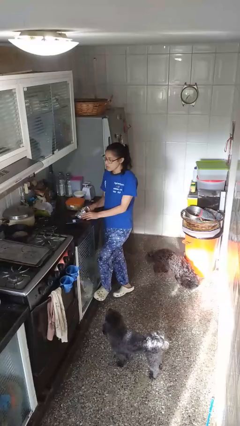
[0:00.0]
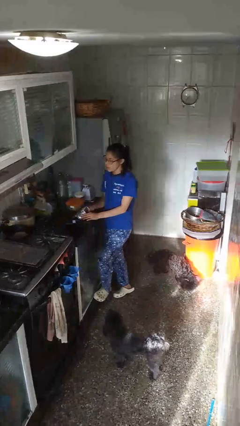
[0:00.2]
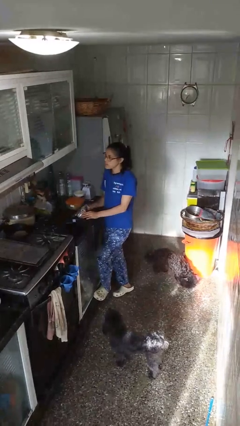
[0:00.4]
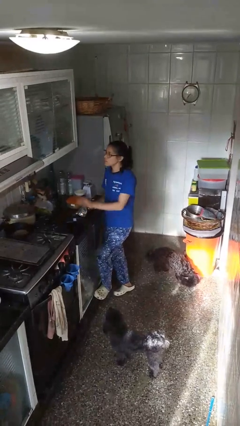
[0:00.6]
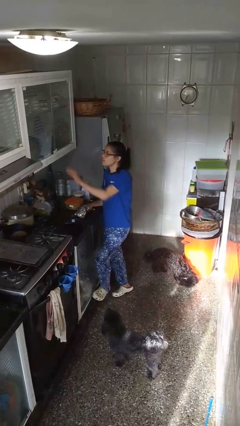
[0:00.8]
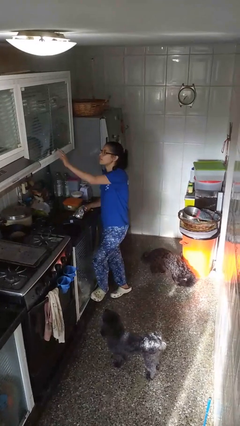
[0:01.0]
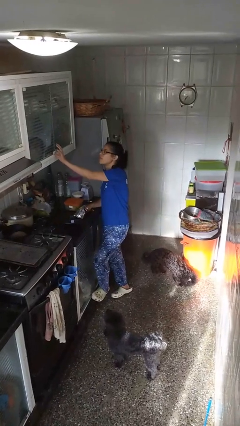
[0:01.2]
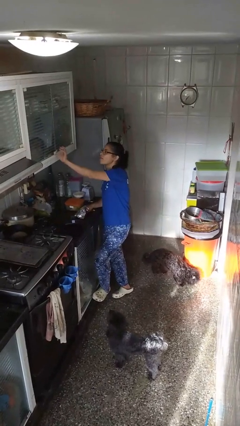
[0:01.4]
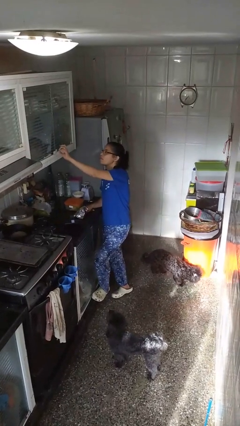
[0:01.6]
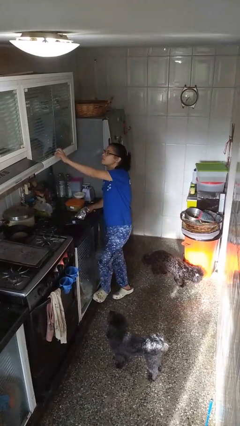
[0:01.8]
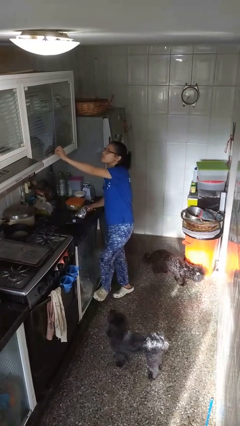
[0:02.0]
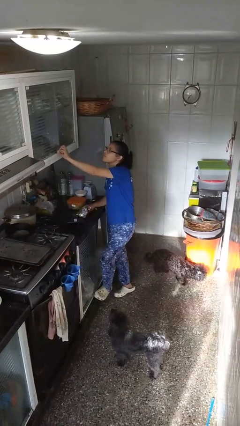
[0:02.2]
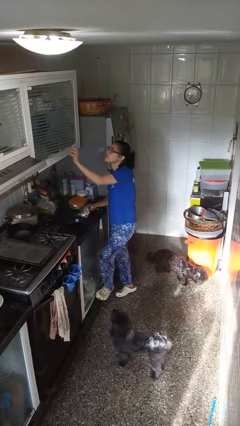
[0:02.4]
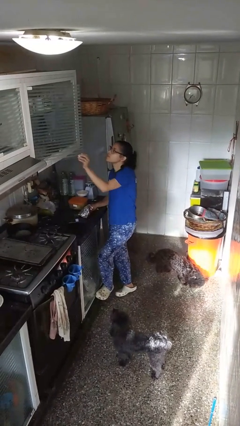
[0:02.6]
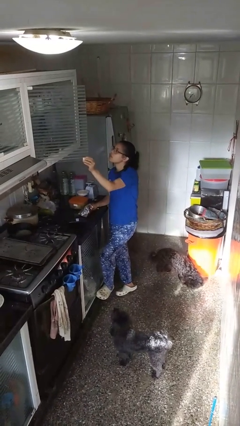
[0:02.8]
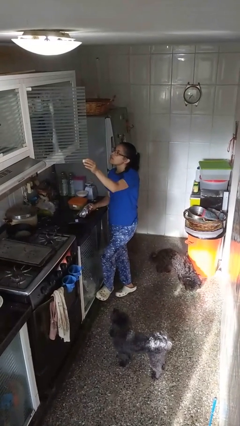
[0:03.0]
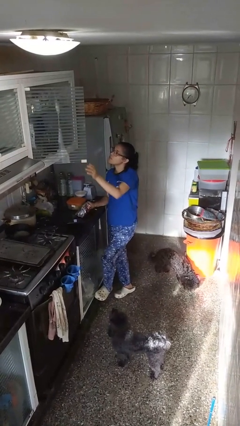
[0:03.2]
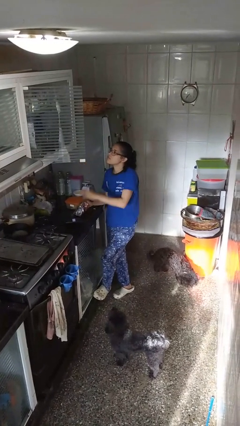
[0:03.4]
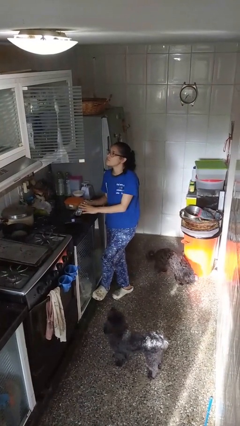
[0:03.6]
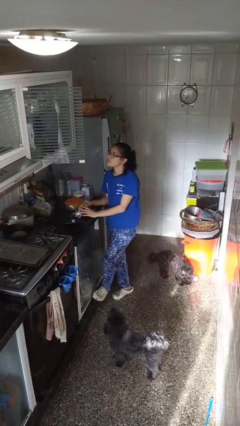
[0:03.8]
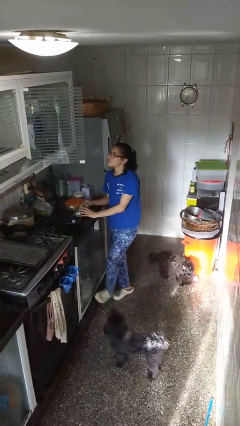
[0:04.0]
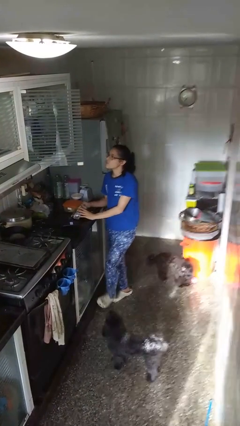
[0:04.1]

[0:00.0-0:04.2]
person closes cabinet

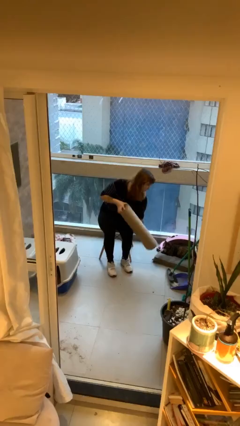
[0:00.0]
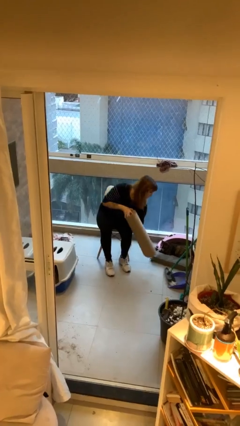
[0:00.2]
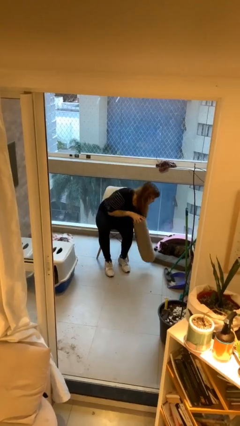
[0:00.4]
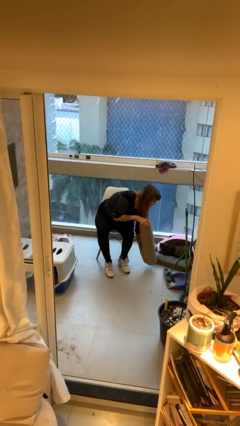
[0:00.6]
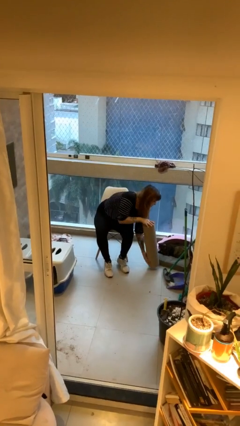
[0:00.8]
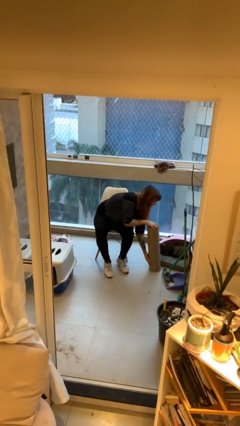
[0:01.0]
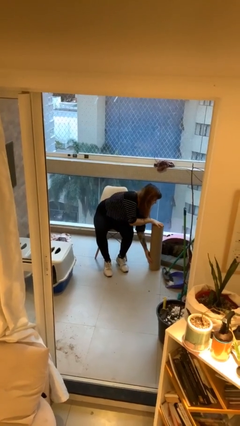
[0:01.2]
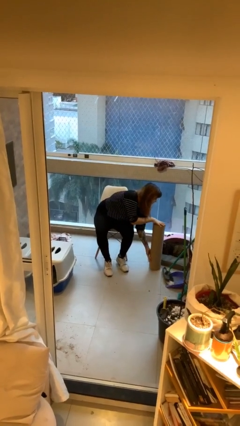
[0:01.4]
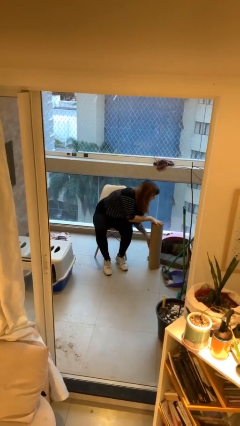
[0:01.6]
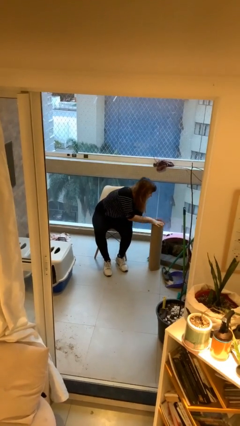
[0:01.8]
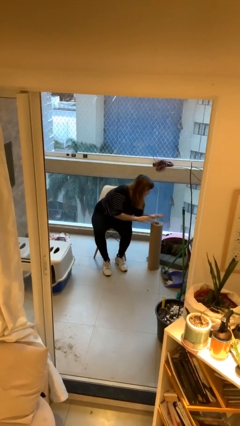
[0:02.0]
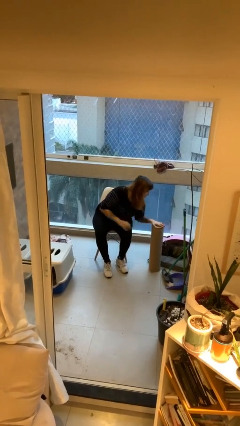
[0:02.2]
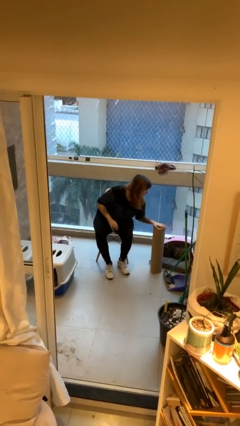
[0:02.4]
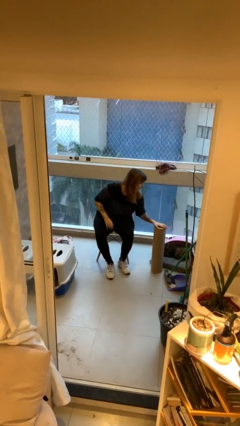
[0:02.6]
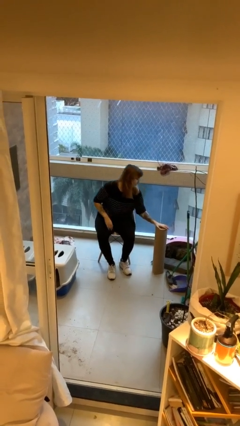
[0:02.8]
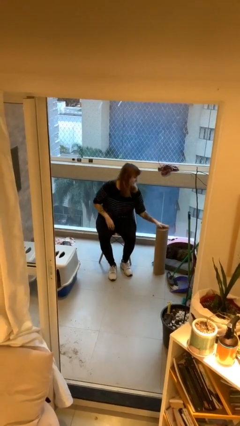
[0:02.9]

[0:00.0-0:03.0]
person puts down object on floor

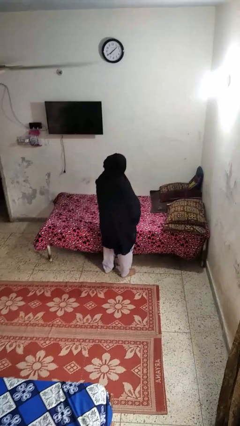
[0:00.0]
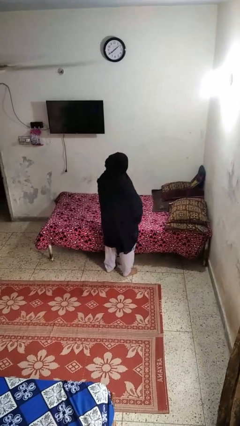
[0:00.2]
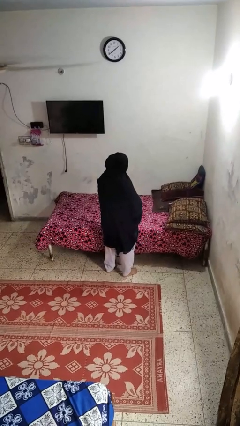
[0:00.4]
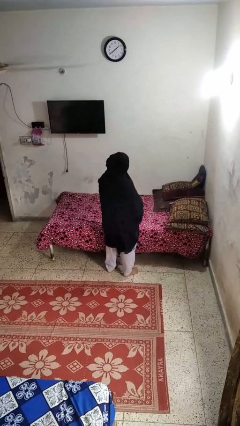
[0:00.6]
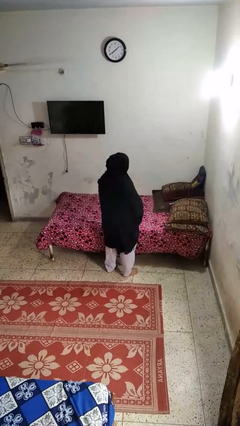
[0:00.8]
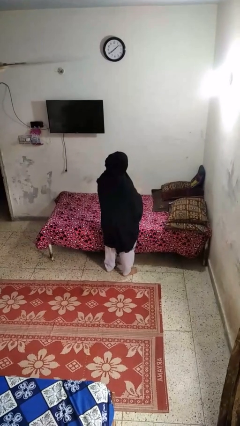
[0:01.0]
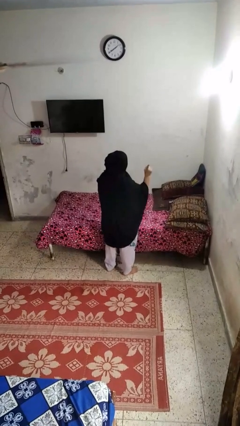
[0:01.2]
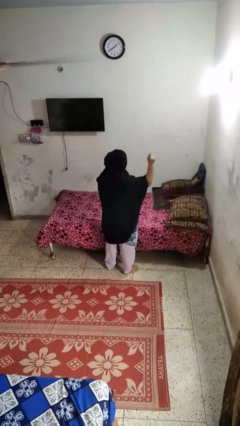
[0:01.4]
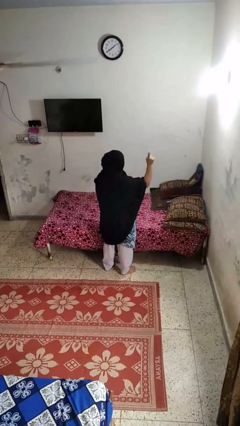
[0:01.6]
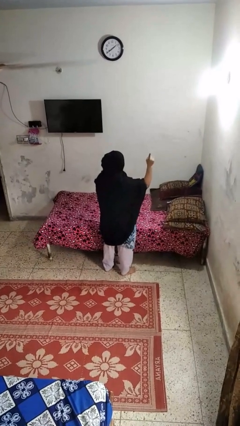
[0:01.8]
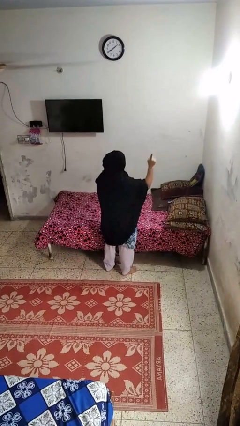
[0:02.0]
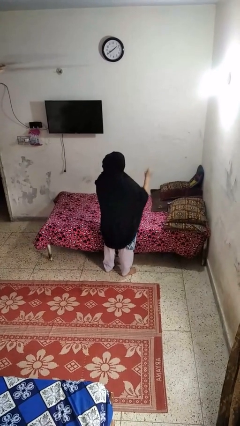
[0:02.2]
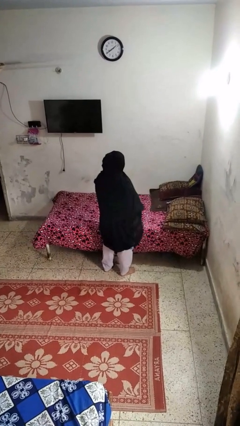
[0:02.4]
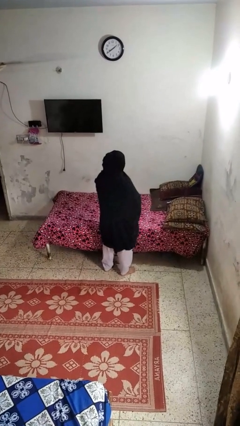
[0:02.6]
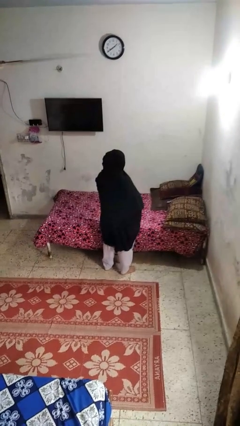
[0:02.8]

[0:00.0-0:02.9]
person gestures number one

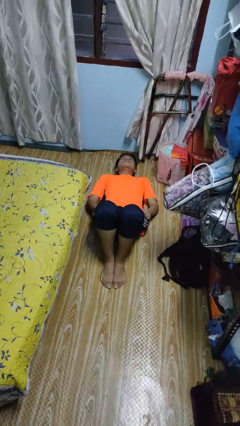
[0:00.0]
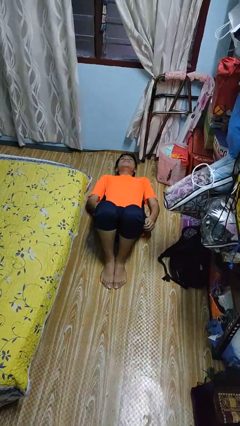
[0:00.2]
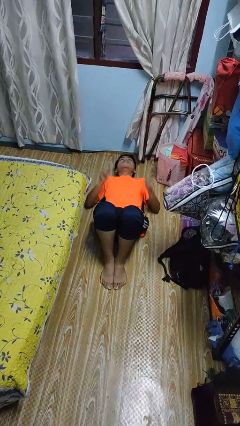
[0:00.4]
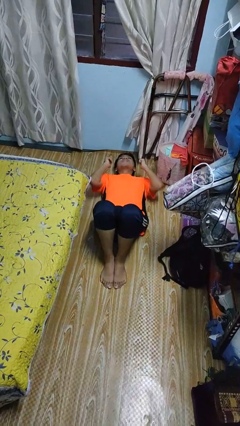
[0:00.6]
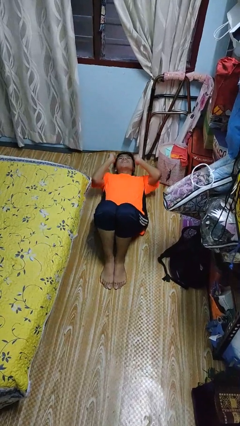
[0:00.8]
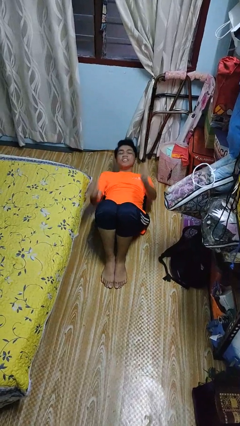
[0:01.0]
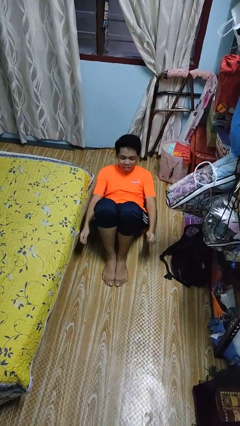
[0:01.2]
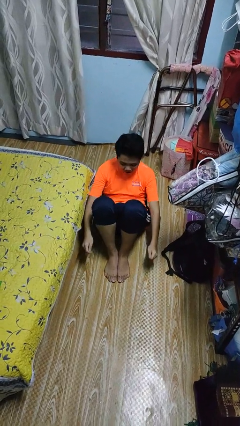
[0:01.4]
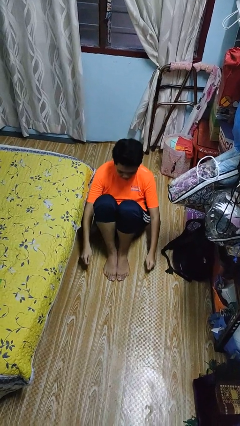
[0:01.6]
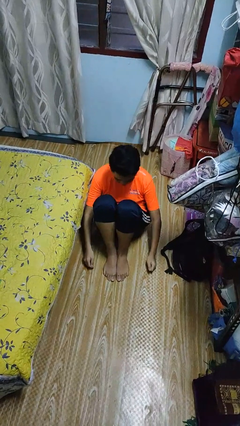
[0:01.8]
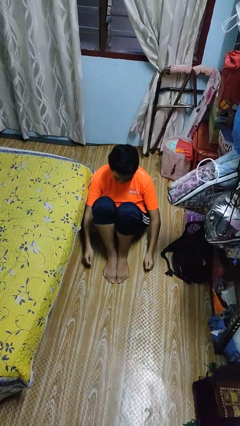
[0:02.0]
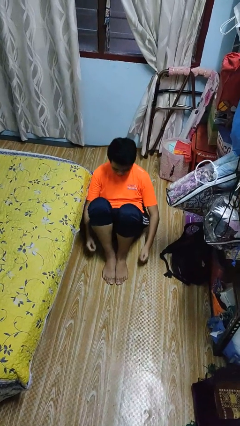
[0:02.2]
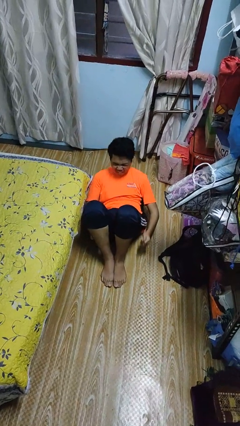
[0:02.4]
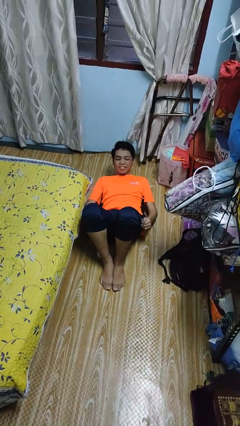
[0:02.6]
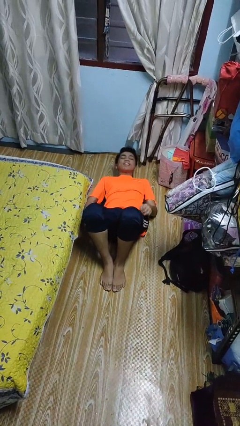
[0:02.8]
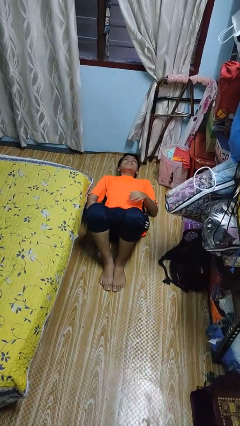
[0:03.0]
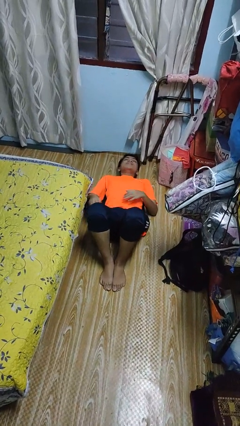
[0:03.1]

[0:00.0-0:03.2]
person exercises with situp

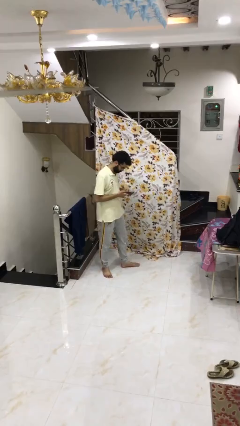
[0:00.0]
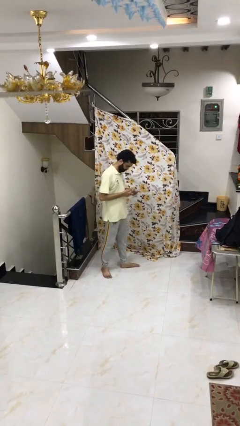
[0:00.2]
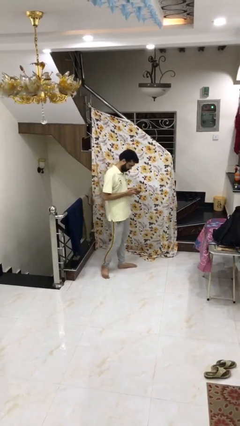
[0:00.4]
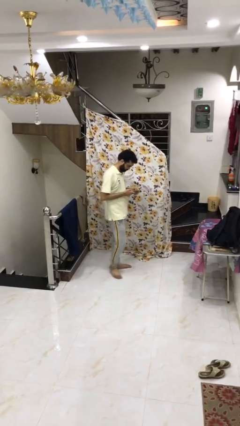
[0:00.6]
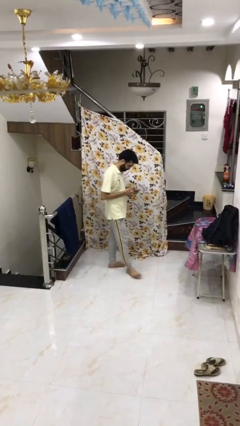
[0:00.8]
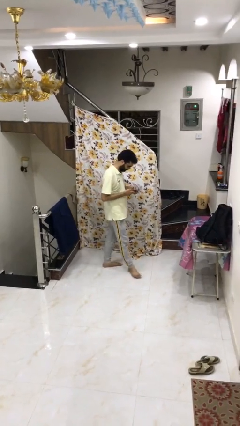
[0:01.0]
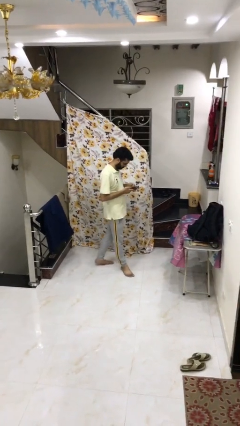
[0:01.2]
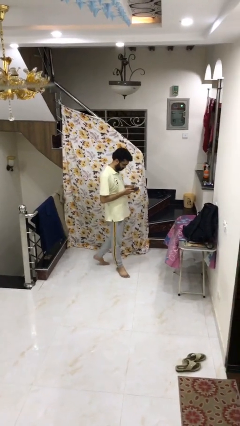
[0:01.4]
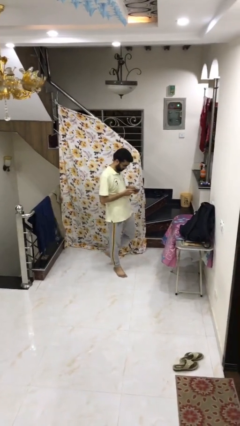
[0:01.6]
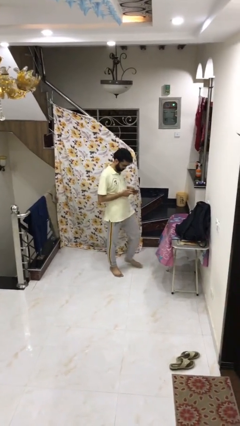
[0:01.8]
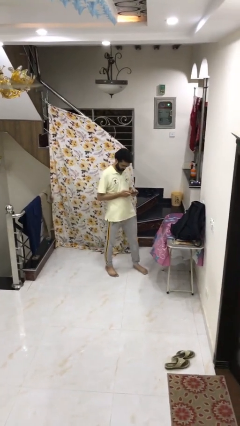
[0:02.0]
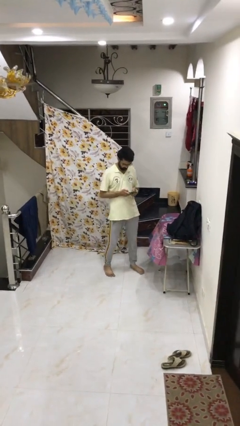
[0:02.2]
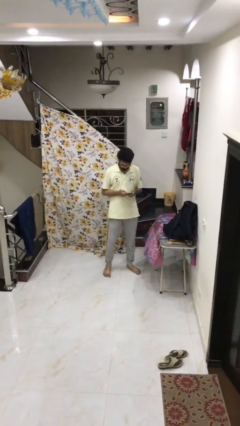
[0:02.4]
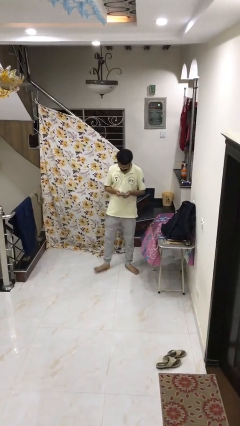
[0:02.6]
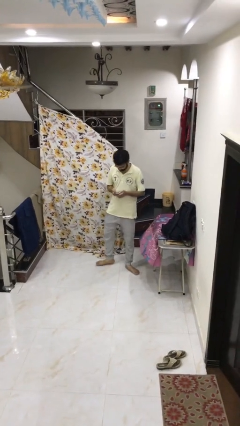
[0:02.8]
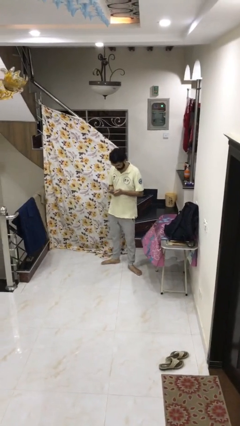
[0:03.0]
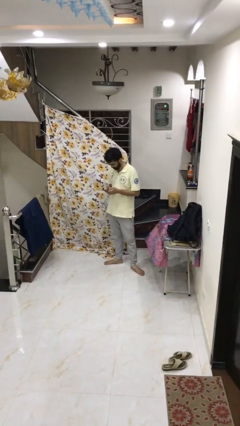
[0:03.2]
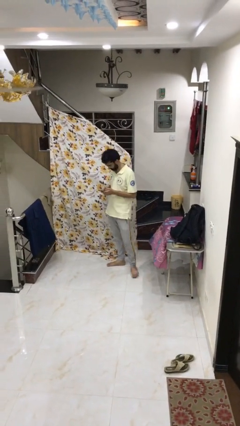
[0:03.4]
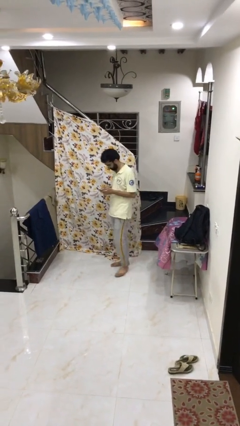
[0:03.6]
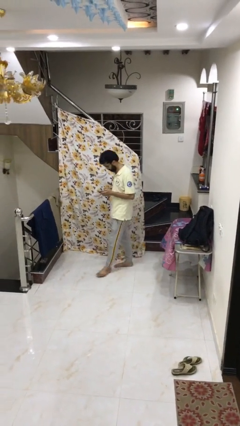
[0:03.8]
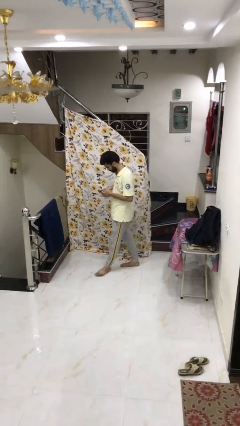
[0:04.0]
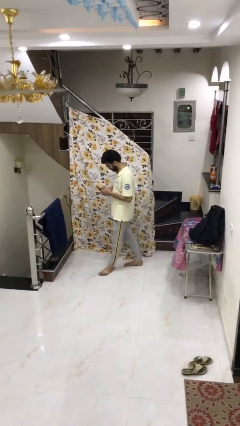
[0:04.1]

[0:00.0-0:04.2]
person texts on phone

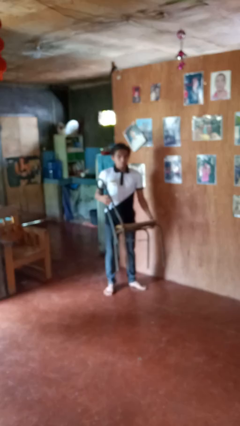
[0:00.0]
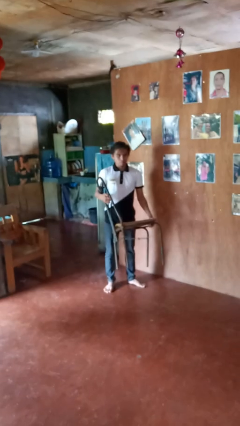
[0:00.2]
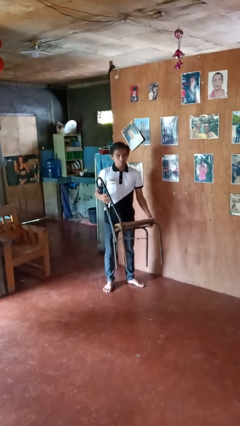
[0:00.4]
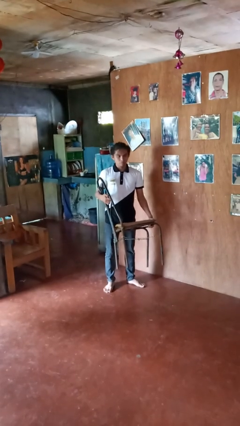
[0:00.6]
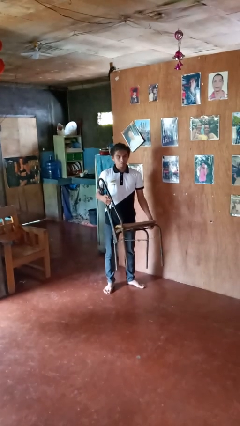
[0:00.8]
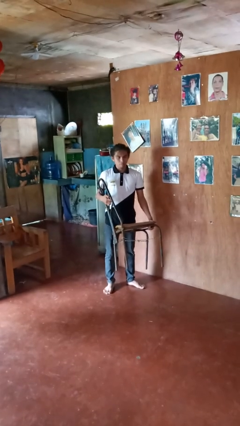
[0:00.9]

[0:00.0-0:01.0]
person carries furniture
